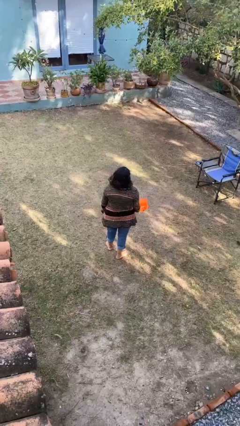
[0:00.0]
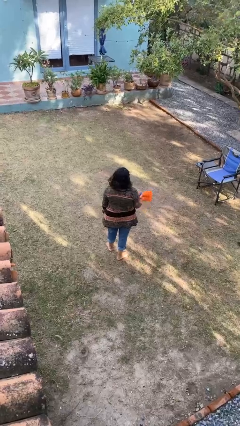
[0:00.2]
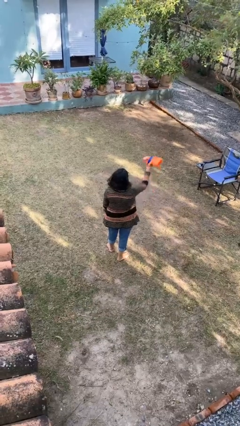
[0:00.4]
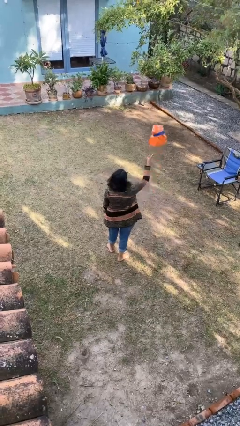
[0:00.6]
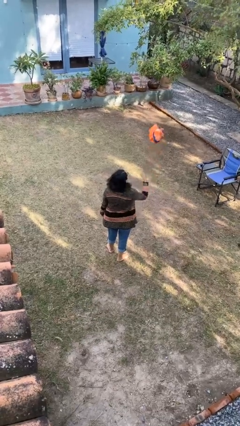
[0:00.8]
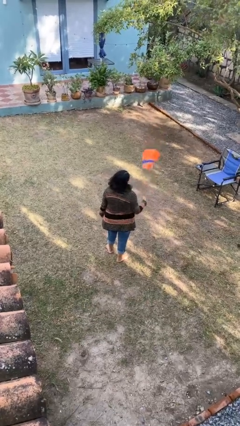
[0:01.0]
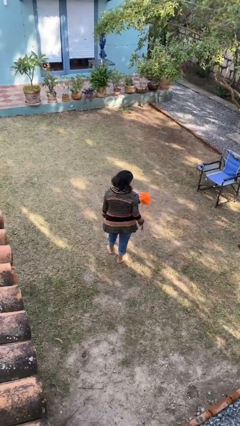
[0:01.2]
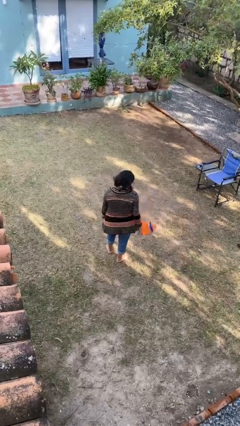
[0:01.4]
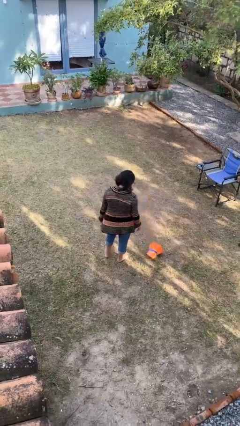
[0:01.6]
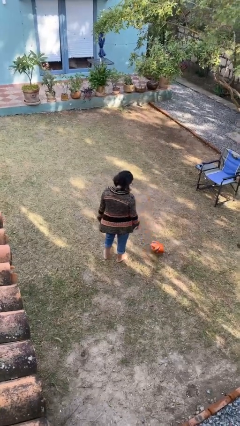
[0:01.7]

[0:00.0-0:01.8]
person throws object into air

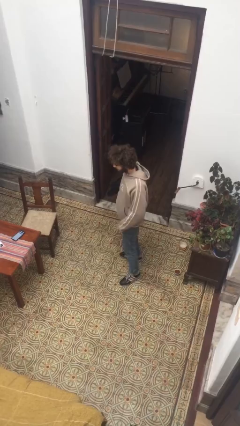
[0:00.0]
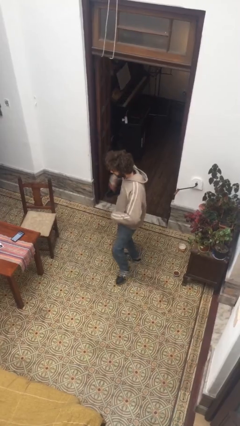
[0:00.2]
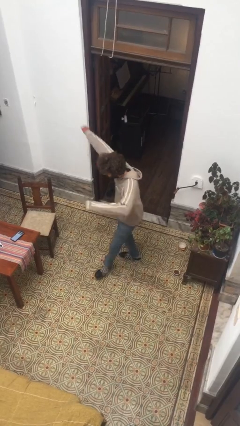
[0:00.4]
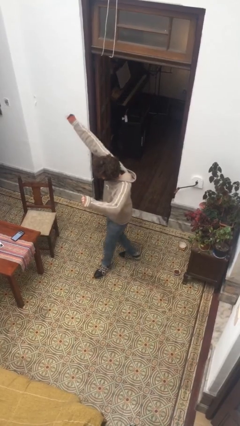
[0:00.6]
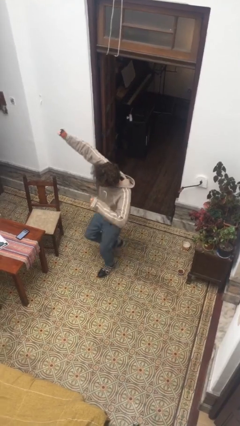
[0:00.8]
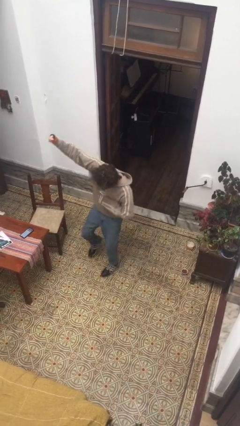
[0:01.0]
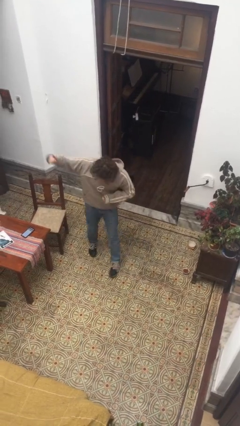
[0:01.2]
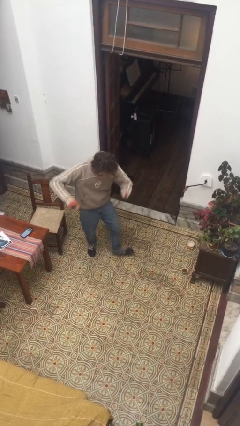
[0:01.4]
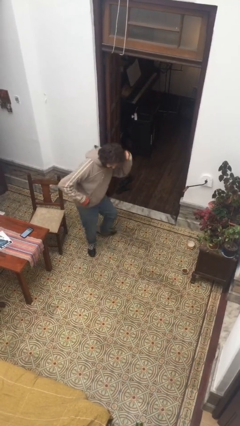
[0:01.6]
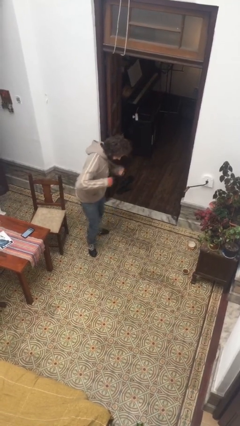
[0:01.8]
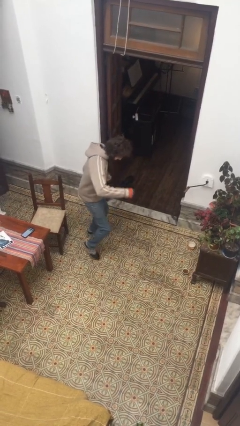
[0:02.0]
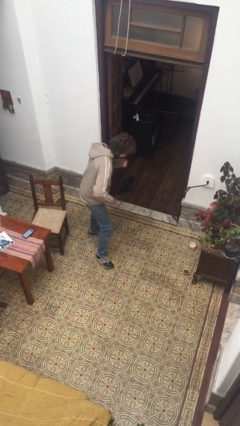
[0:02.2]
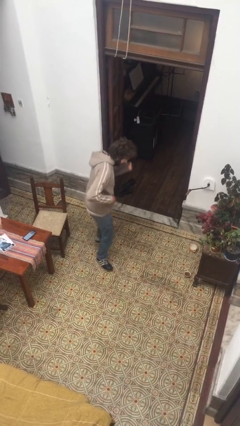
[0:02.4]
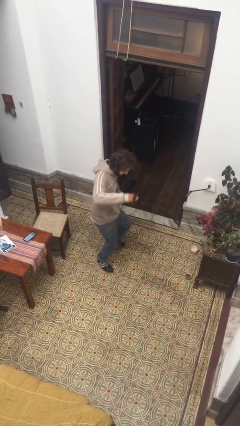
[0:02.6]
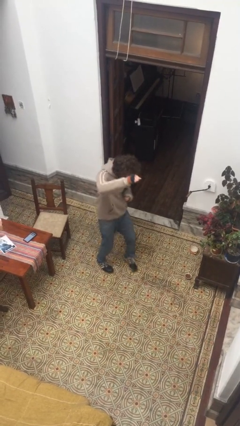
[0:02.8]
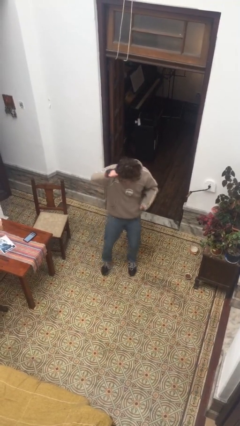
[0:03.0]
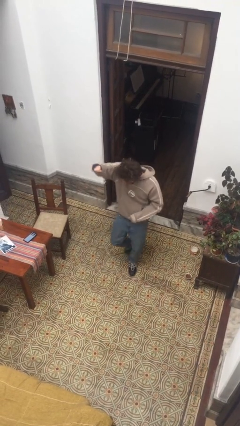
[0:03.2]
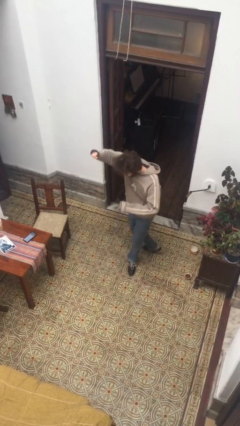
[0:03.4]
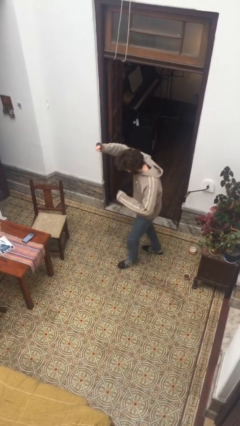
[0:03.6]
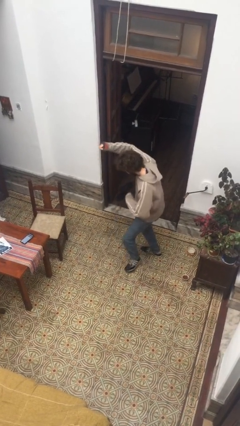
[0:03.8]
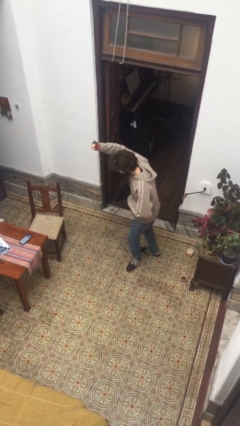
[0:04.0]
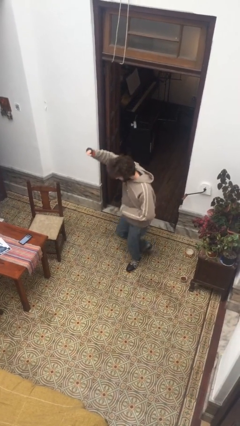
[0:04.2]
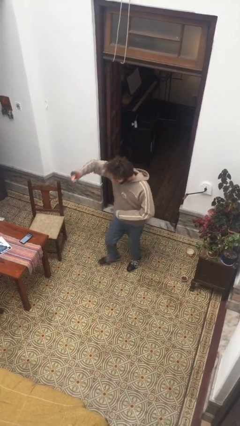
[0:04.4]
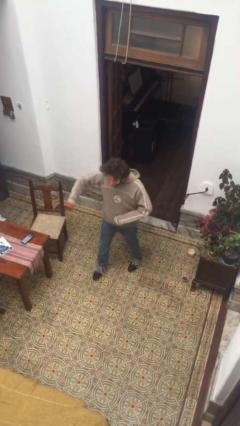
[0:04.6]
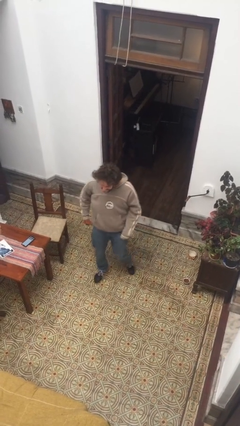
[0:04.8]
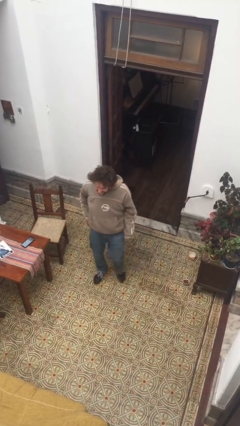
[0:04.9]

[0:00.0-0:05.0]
person dances in place

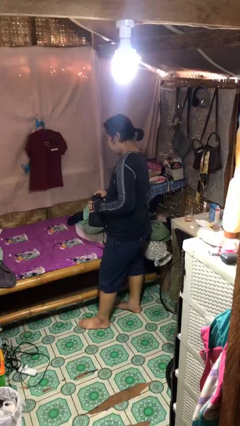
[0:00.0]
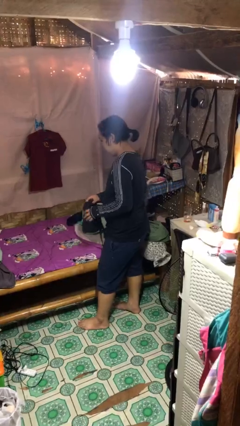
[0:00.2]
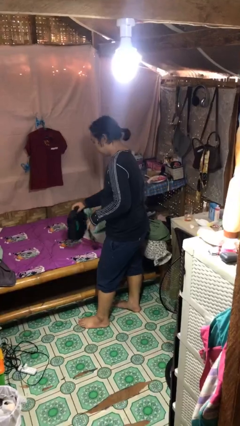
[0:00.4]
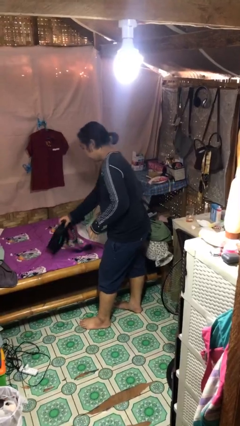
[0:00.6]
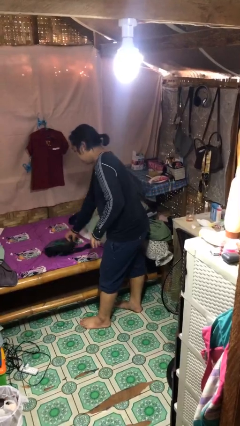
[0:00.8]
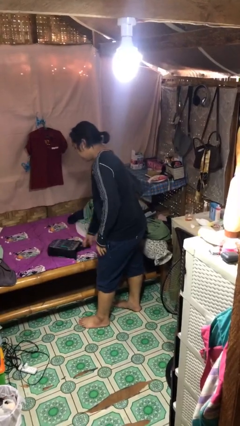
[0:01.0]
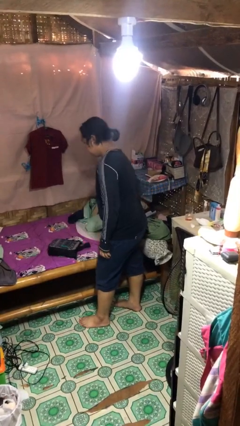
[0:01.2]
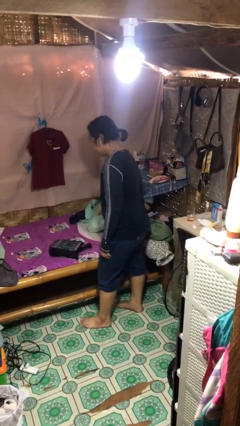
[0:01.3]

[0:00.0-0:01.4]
person puts down object on bed

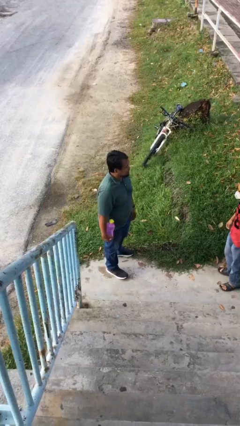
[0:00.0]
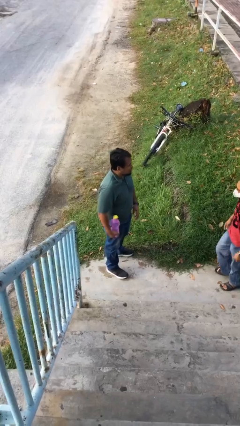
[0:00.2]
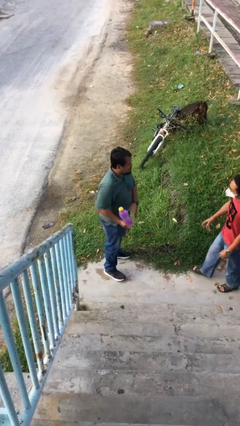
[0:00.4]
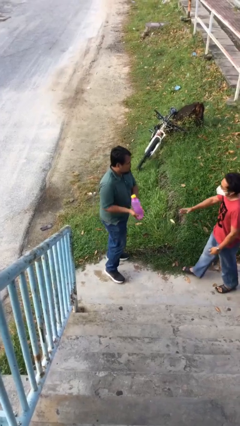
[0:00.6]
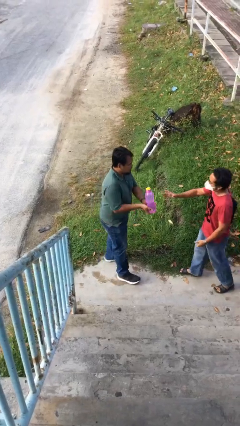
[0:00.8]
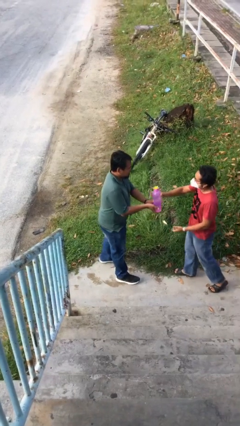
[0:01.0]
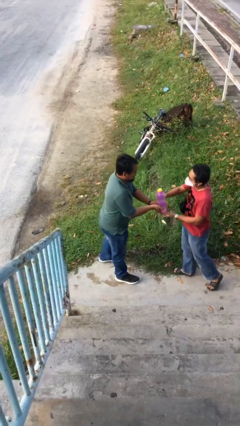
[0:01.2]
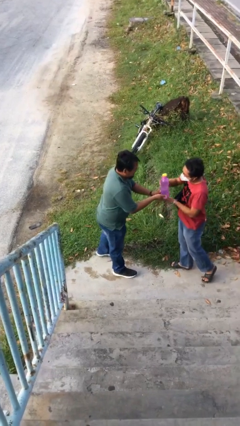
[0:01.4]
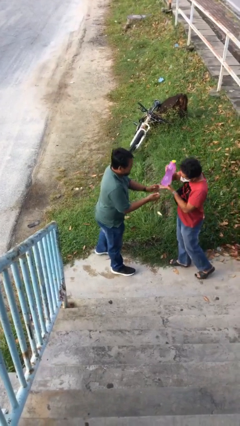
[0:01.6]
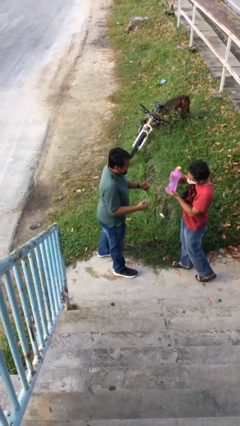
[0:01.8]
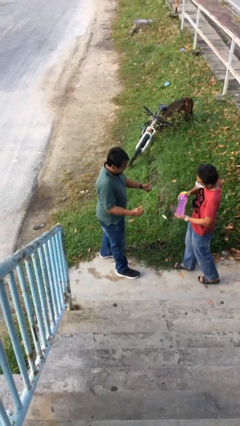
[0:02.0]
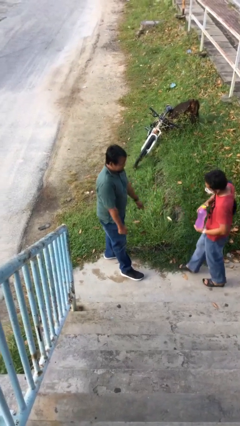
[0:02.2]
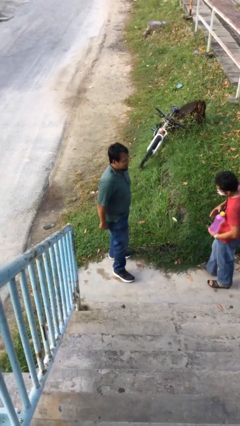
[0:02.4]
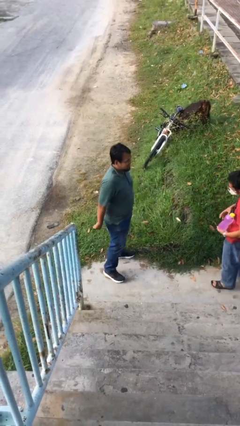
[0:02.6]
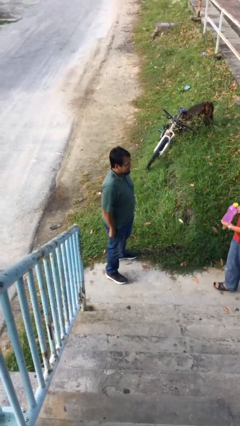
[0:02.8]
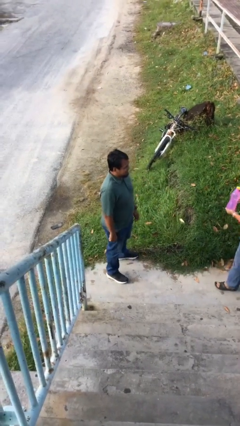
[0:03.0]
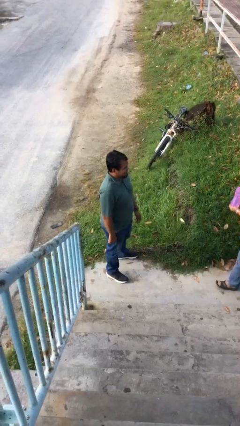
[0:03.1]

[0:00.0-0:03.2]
person transfers object to person

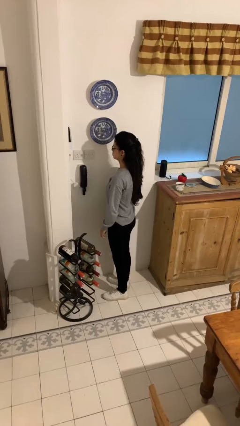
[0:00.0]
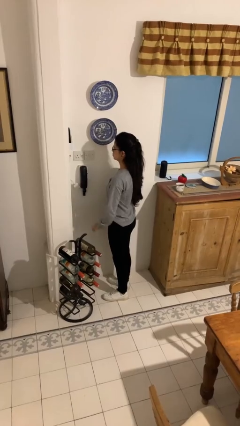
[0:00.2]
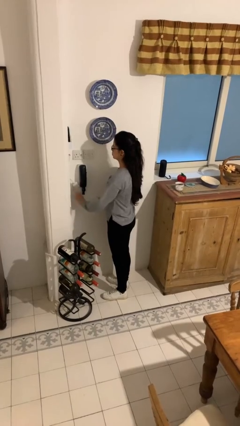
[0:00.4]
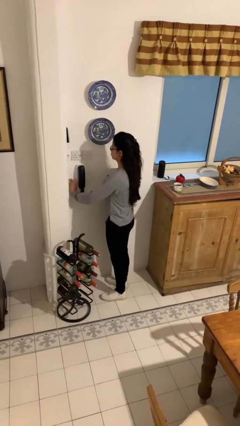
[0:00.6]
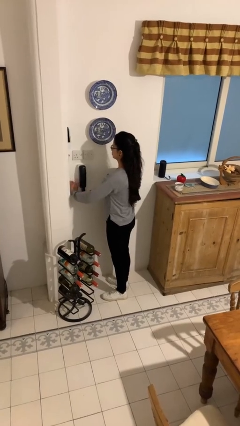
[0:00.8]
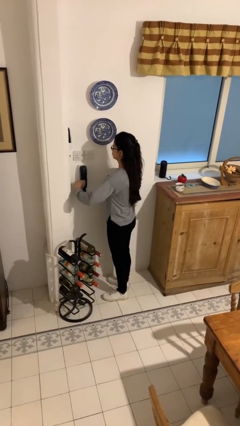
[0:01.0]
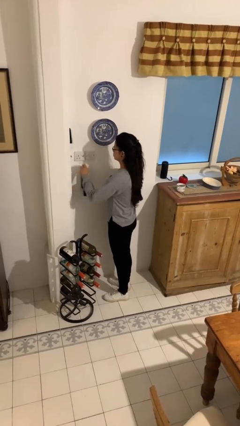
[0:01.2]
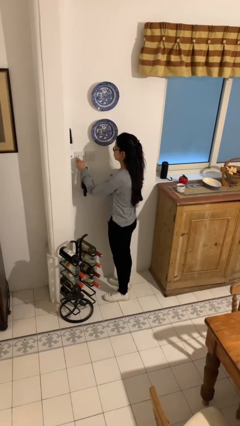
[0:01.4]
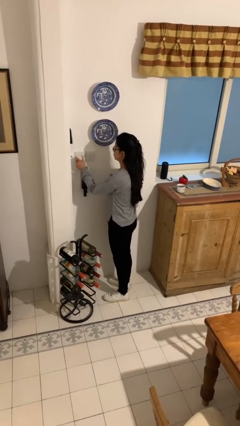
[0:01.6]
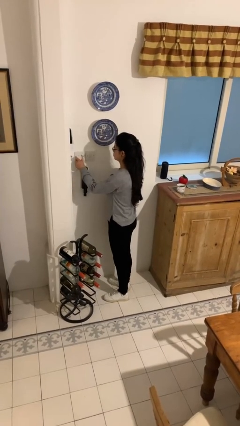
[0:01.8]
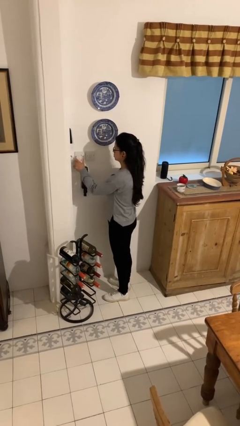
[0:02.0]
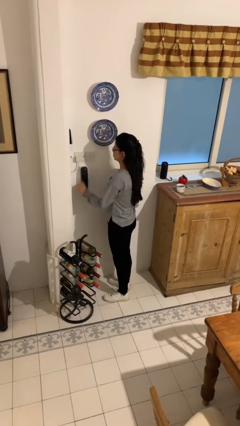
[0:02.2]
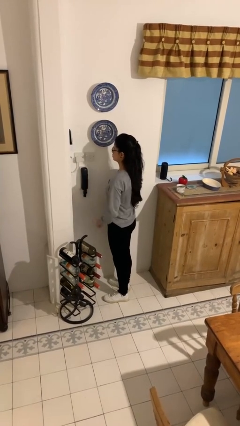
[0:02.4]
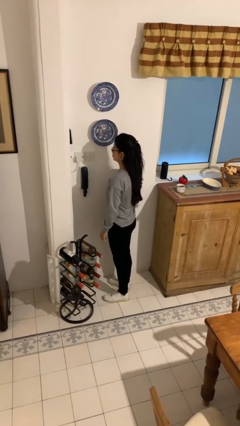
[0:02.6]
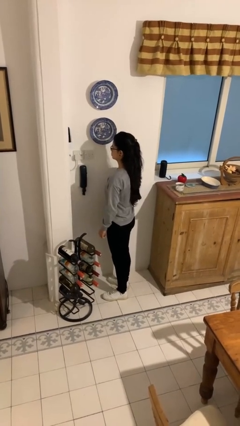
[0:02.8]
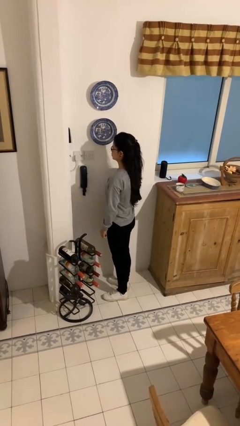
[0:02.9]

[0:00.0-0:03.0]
person plugs into electrical socket

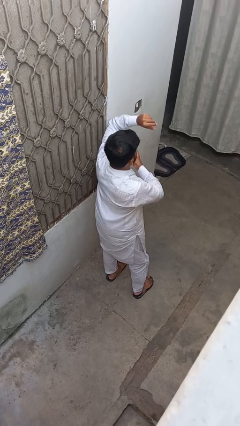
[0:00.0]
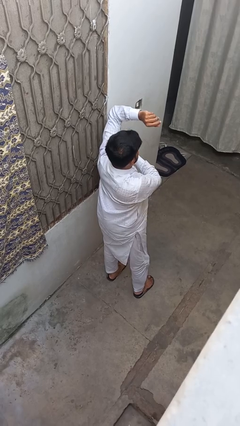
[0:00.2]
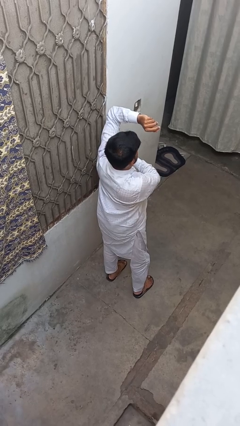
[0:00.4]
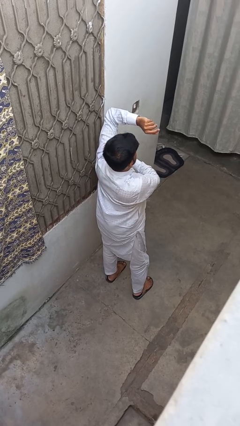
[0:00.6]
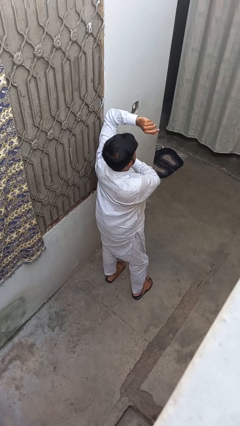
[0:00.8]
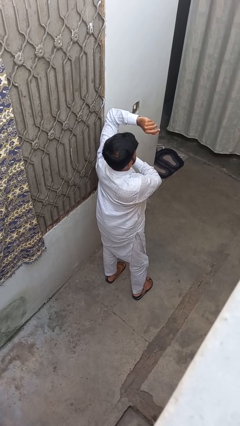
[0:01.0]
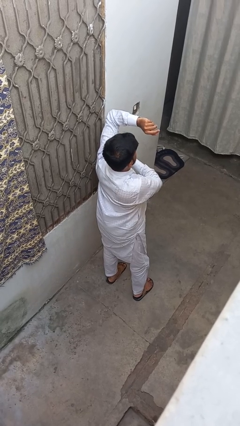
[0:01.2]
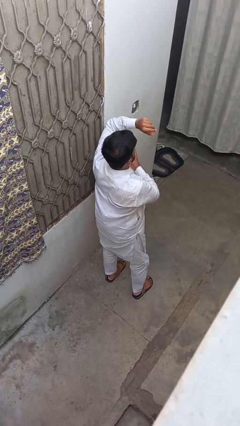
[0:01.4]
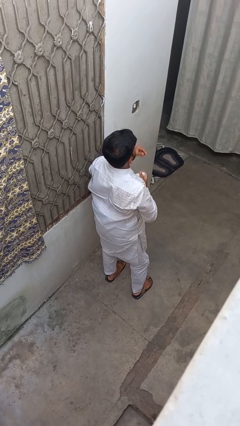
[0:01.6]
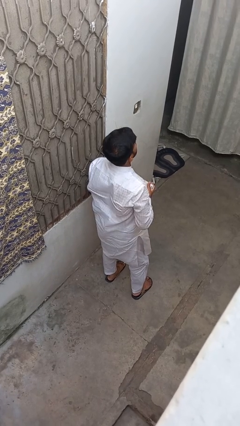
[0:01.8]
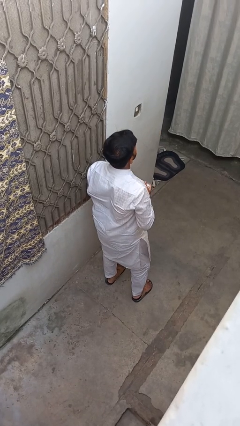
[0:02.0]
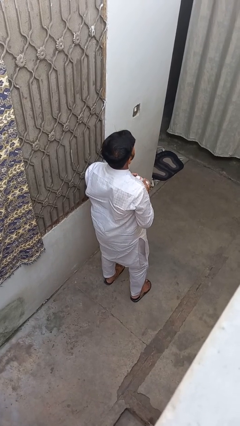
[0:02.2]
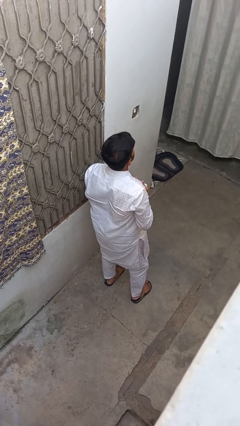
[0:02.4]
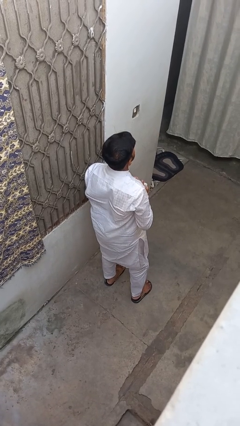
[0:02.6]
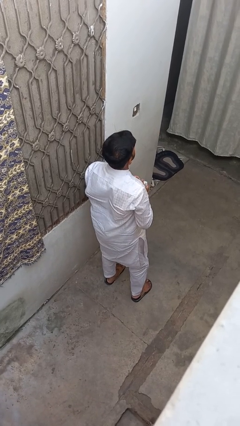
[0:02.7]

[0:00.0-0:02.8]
person applies deodorant
